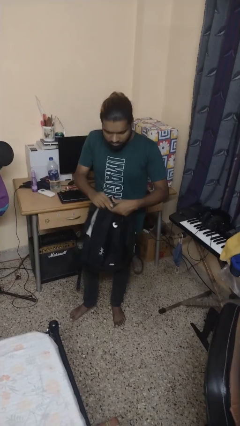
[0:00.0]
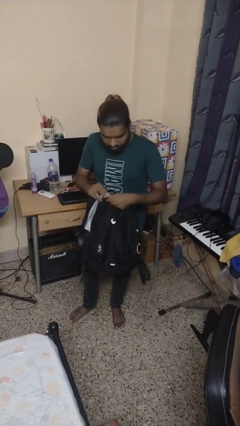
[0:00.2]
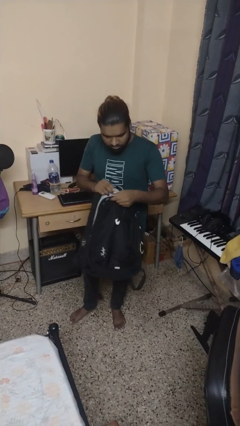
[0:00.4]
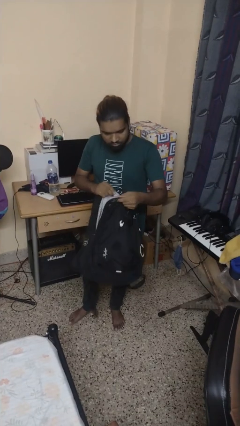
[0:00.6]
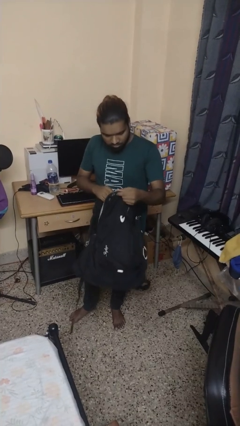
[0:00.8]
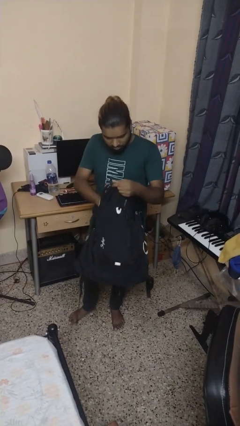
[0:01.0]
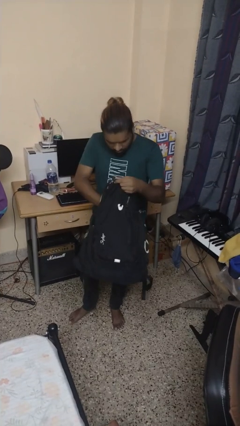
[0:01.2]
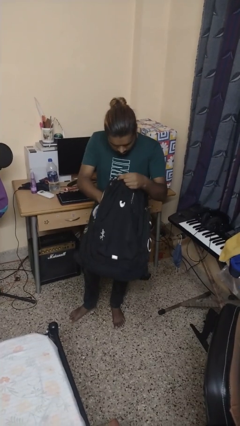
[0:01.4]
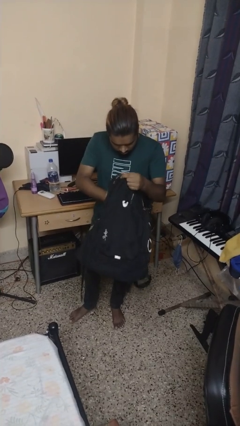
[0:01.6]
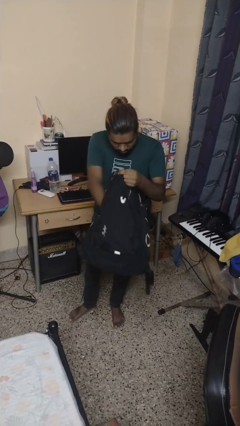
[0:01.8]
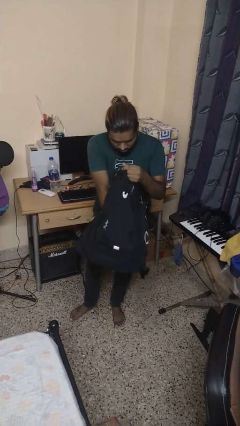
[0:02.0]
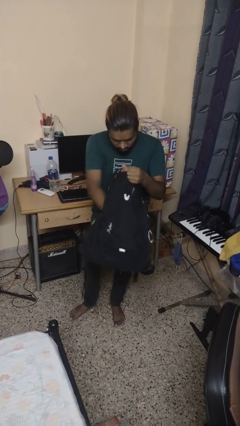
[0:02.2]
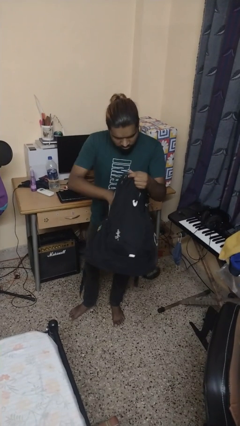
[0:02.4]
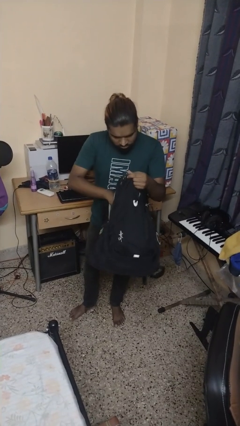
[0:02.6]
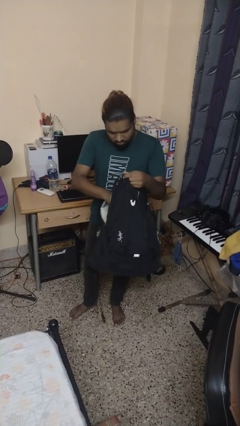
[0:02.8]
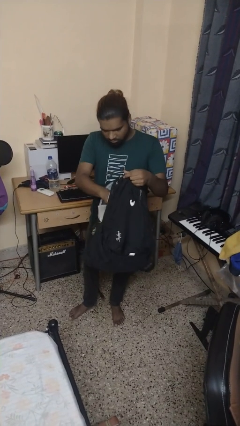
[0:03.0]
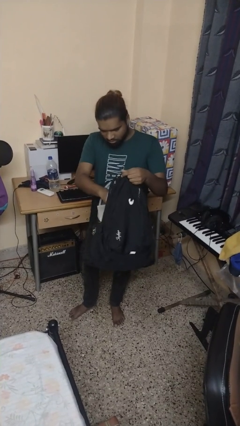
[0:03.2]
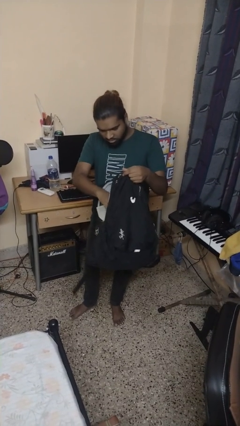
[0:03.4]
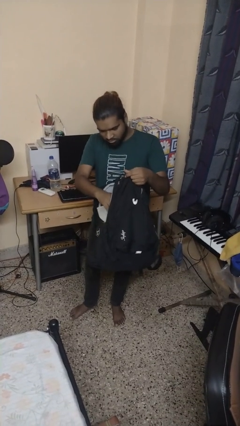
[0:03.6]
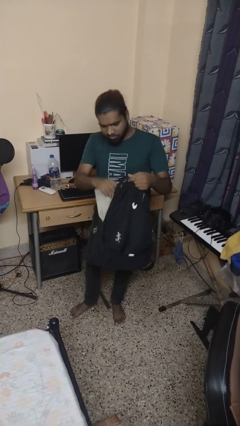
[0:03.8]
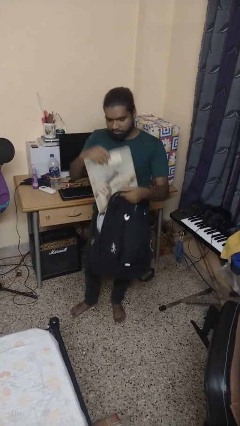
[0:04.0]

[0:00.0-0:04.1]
person searches in backpack

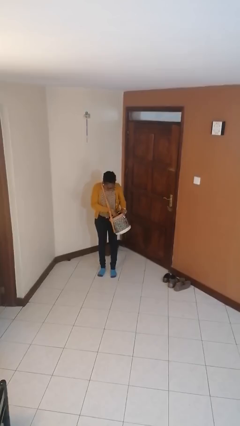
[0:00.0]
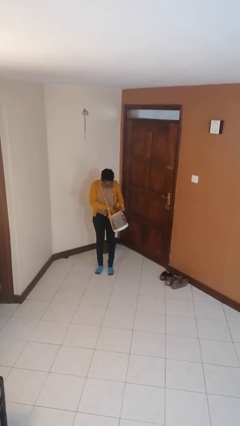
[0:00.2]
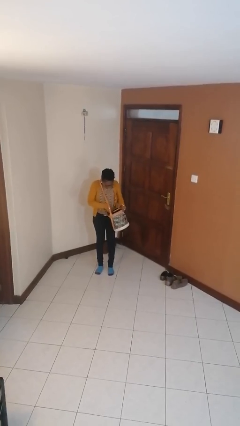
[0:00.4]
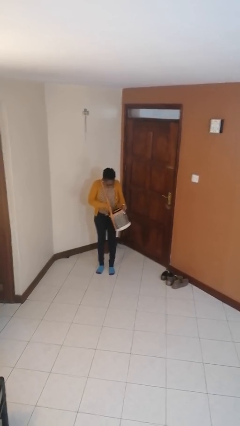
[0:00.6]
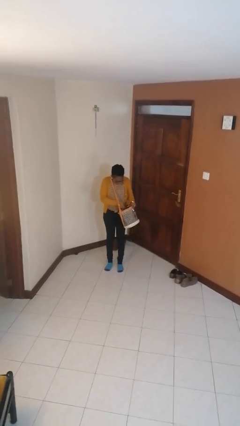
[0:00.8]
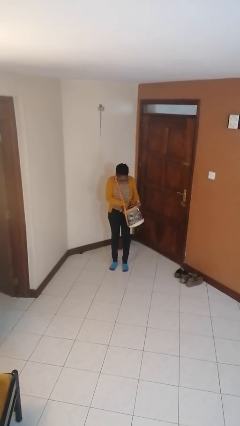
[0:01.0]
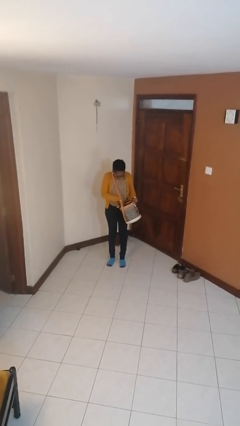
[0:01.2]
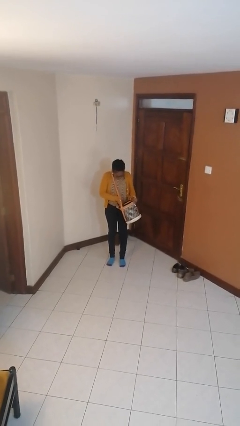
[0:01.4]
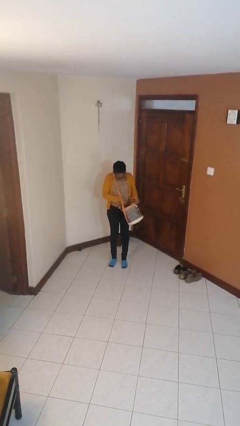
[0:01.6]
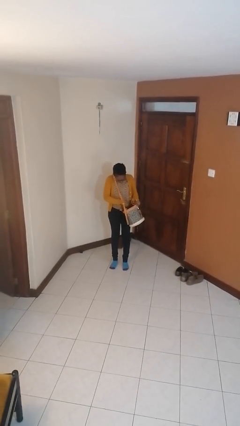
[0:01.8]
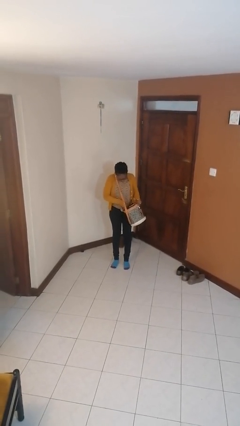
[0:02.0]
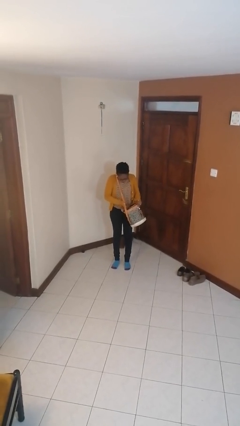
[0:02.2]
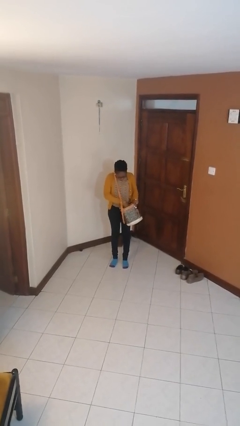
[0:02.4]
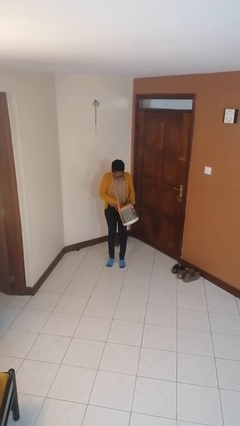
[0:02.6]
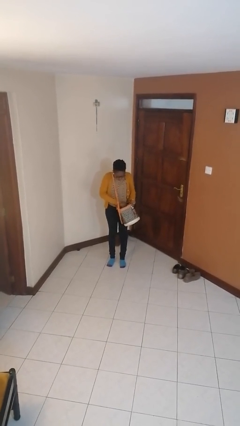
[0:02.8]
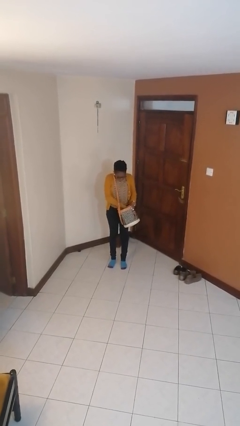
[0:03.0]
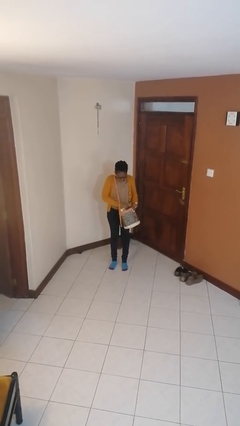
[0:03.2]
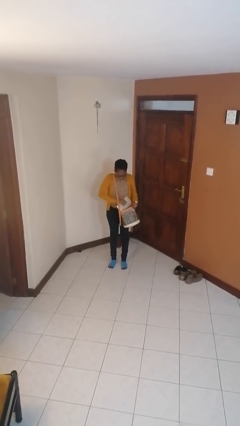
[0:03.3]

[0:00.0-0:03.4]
person searches in purse

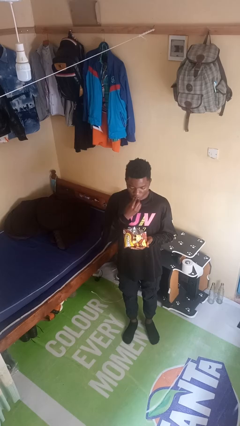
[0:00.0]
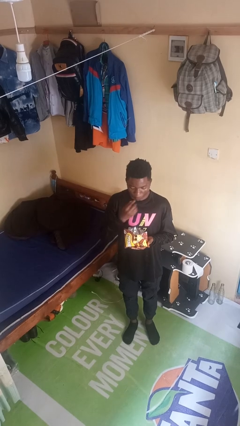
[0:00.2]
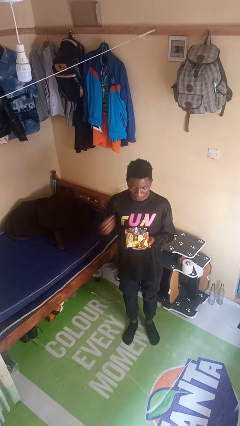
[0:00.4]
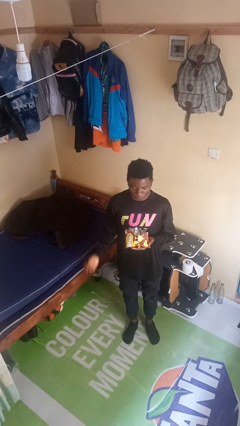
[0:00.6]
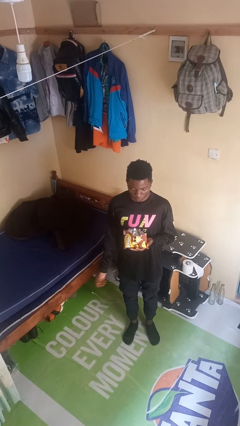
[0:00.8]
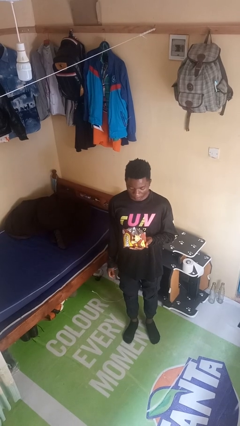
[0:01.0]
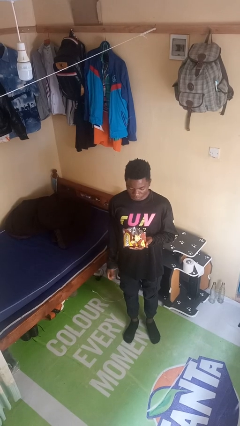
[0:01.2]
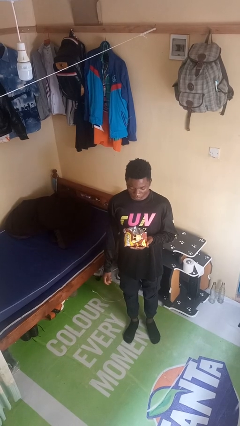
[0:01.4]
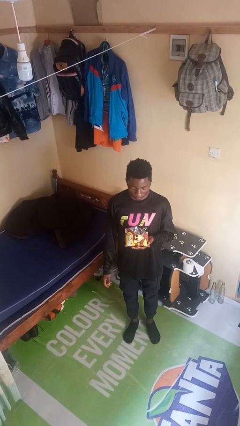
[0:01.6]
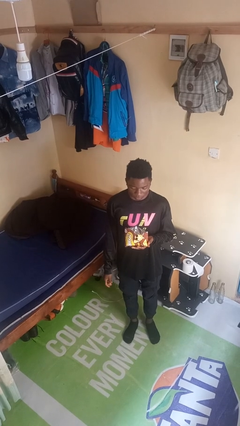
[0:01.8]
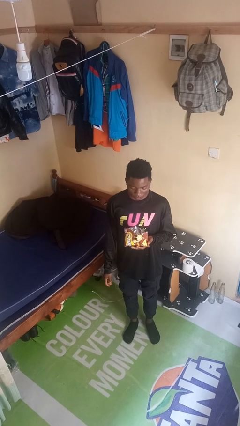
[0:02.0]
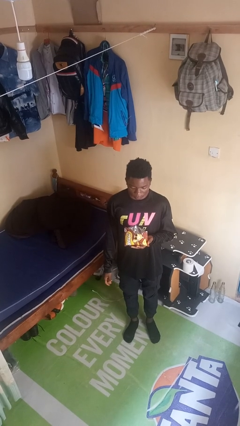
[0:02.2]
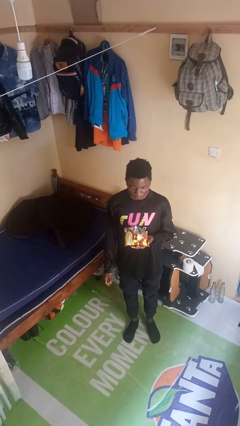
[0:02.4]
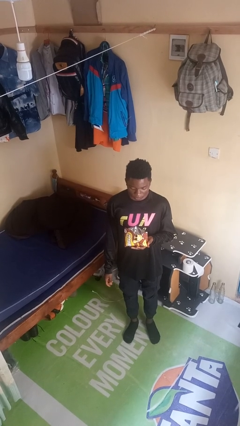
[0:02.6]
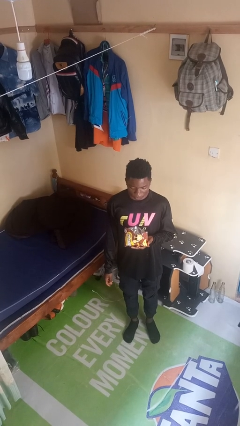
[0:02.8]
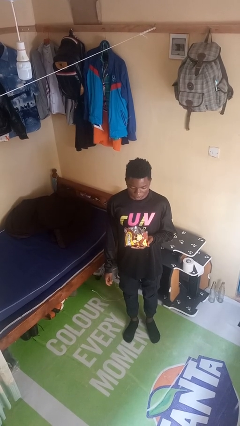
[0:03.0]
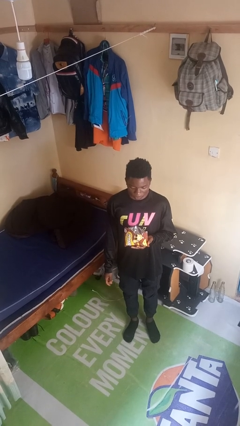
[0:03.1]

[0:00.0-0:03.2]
person eats snack from bag

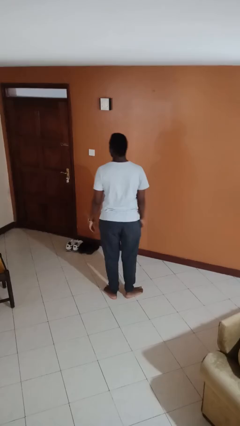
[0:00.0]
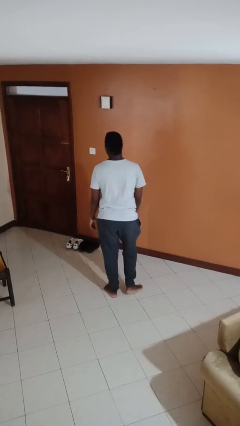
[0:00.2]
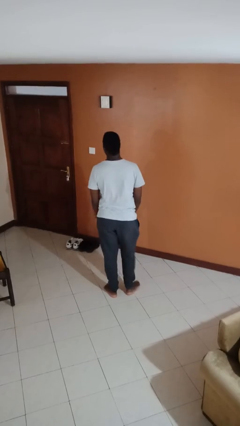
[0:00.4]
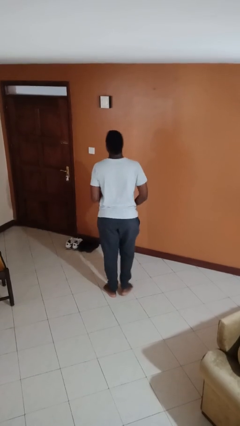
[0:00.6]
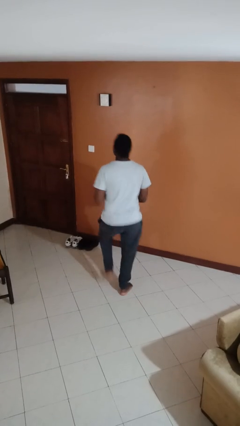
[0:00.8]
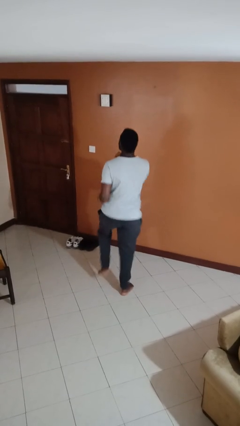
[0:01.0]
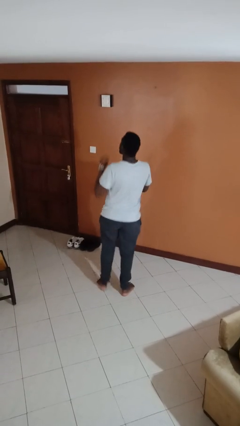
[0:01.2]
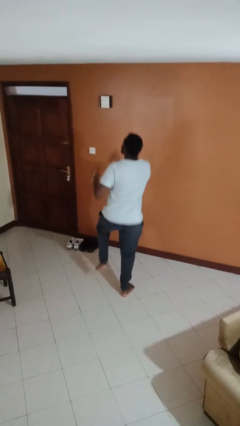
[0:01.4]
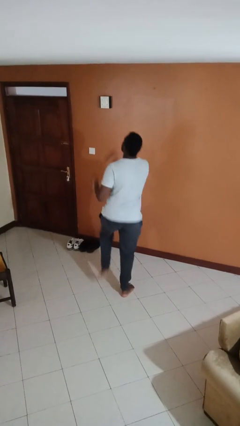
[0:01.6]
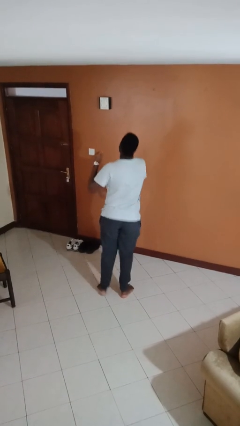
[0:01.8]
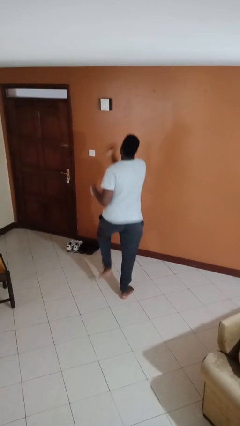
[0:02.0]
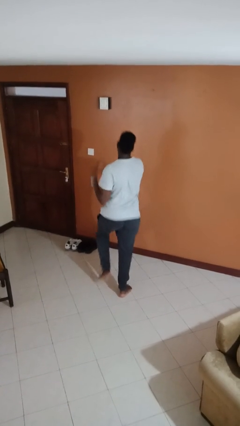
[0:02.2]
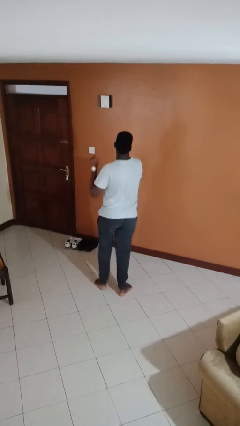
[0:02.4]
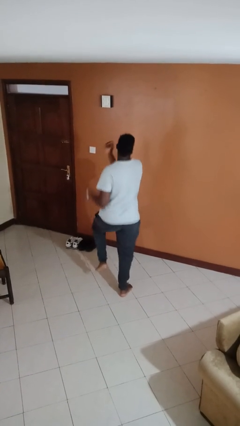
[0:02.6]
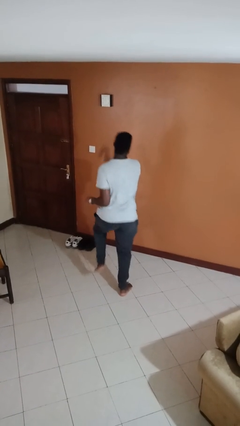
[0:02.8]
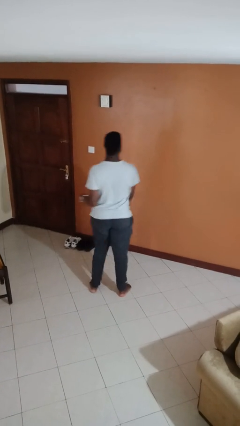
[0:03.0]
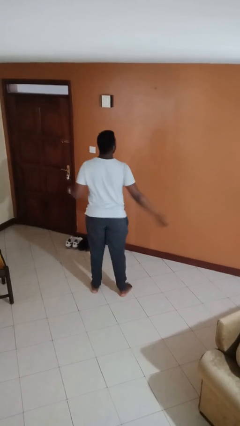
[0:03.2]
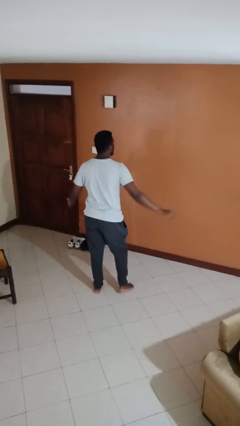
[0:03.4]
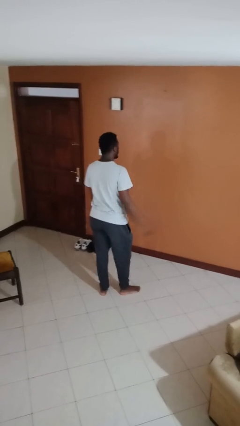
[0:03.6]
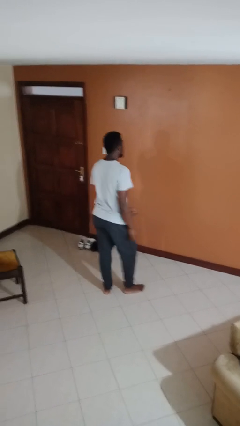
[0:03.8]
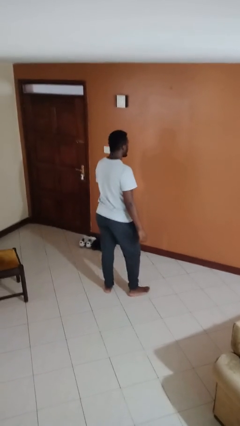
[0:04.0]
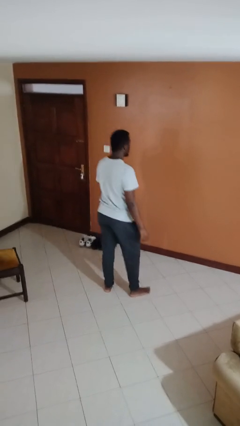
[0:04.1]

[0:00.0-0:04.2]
person dances in place

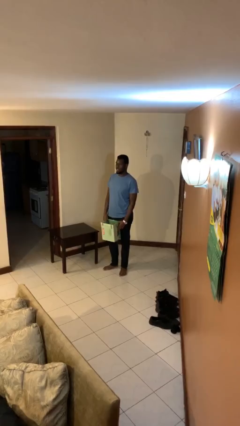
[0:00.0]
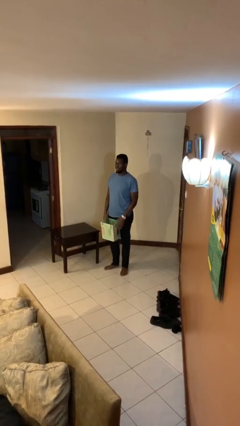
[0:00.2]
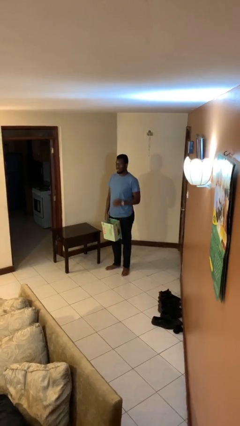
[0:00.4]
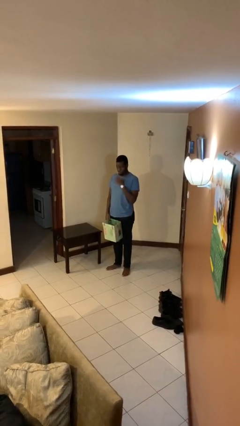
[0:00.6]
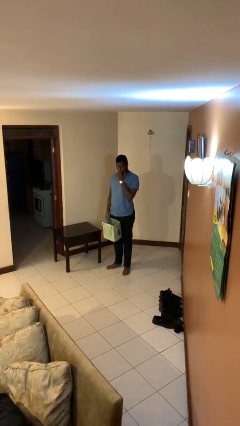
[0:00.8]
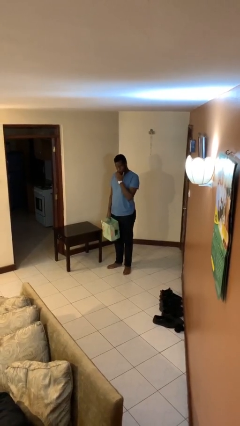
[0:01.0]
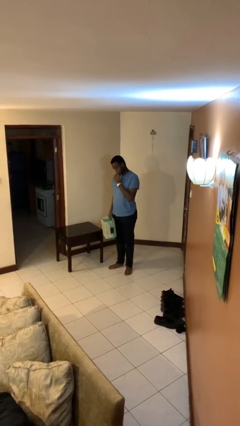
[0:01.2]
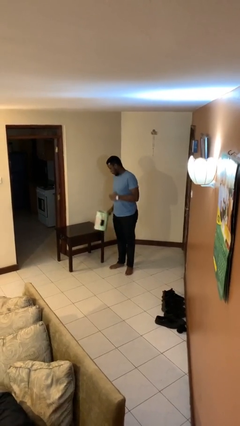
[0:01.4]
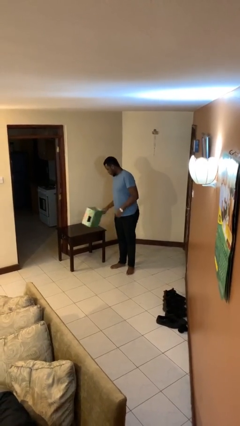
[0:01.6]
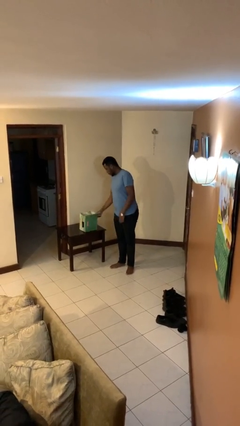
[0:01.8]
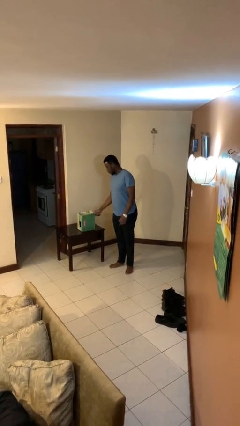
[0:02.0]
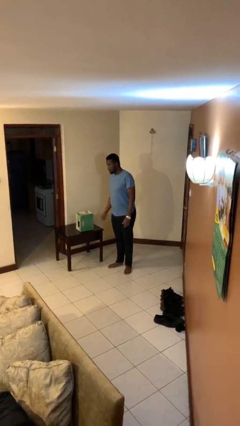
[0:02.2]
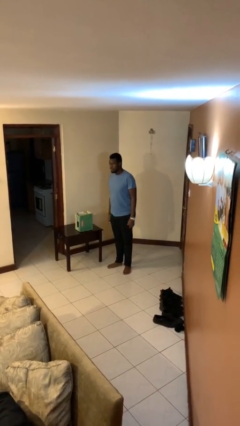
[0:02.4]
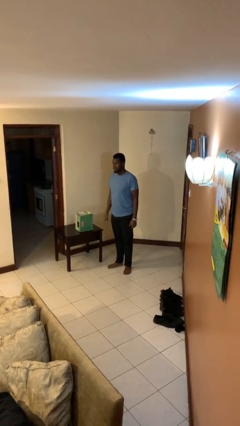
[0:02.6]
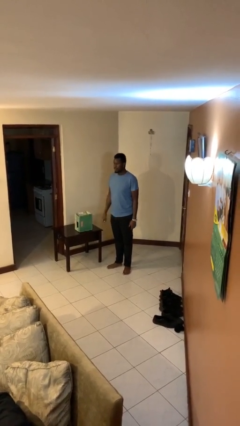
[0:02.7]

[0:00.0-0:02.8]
person puts down object on table

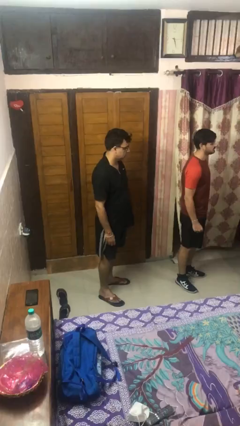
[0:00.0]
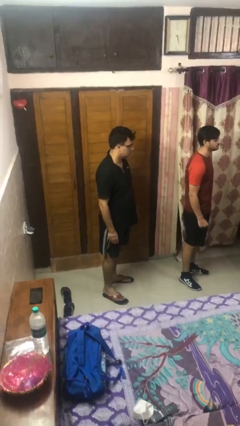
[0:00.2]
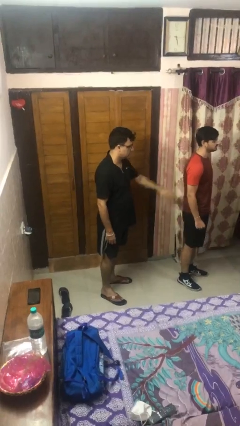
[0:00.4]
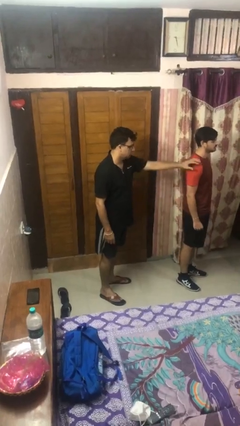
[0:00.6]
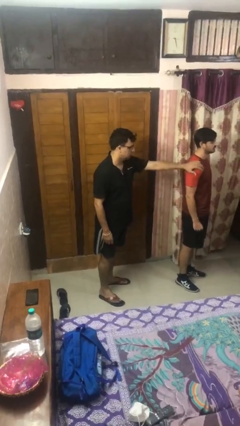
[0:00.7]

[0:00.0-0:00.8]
person grabs person by shoulder
